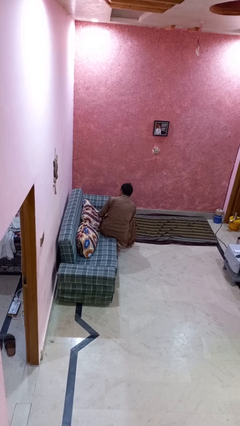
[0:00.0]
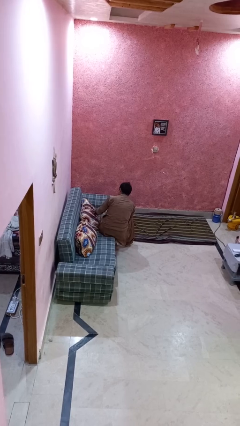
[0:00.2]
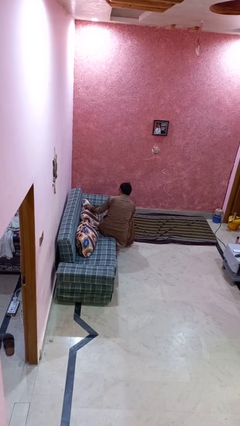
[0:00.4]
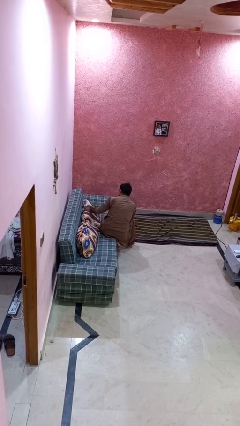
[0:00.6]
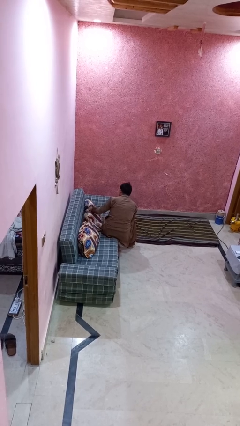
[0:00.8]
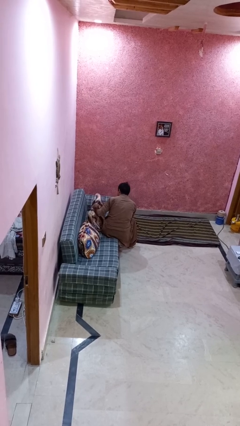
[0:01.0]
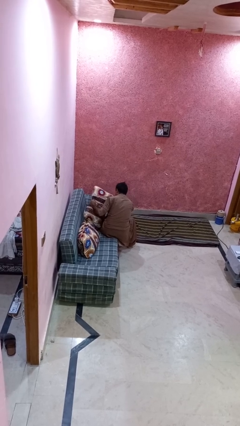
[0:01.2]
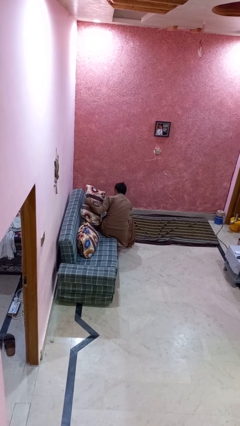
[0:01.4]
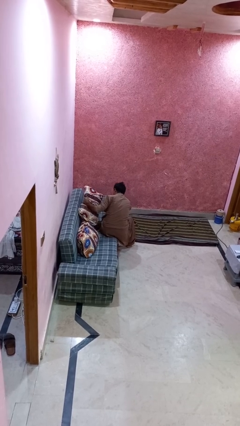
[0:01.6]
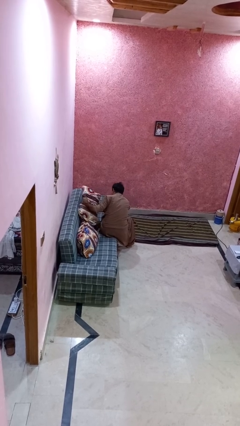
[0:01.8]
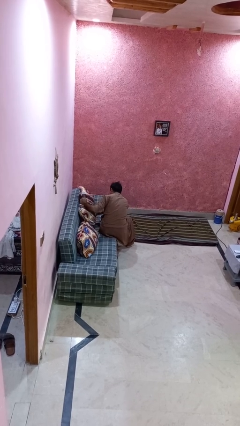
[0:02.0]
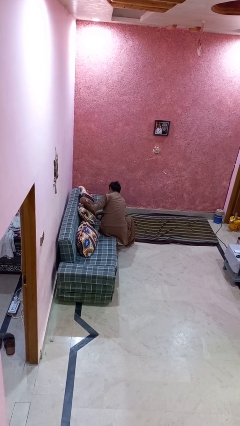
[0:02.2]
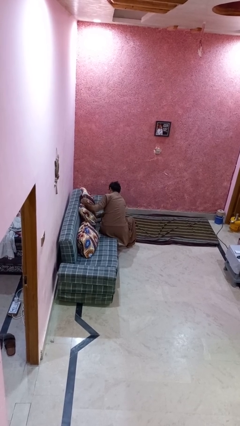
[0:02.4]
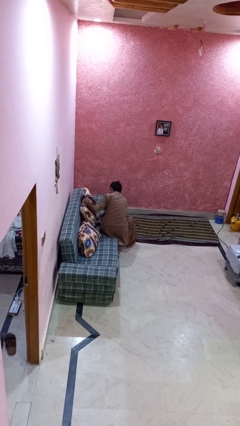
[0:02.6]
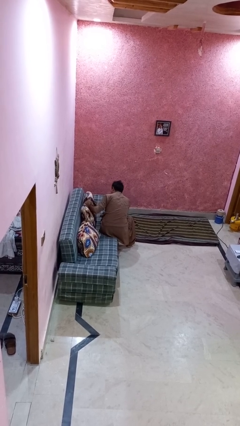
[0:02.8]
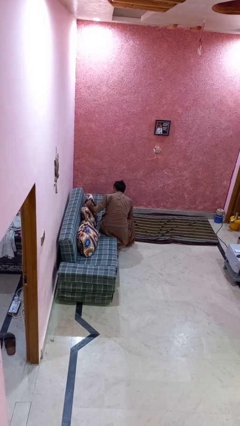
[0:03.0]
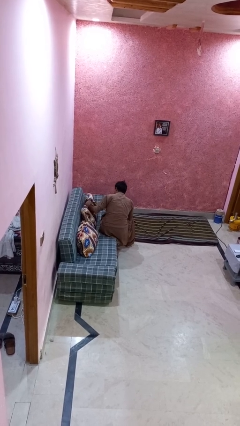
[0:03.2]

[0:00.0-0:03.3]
person searches in couch

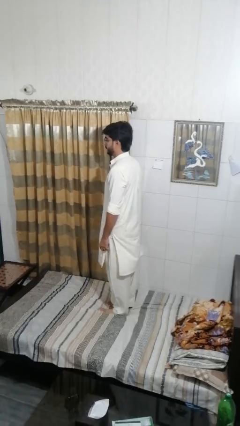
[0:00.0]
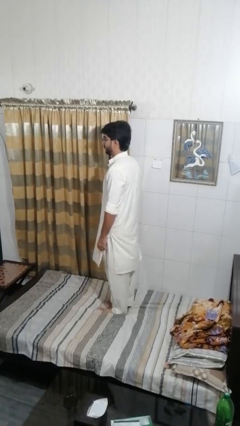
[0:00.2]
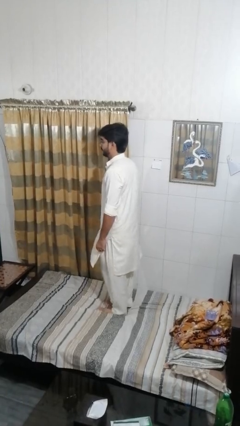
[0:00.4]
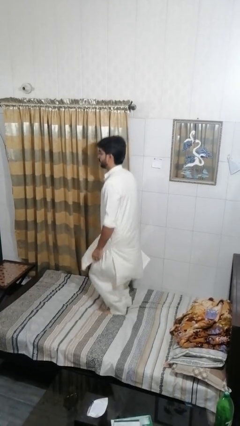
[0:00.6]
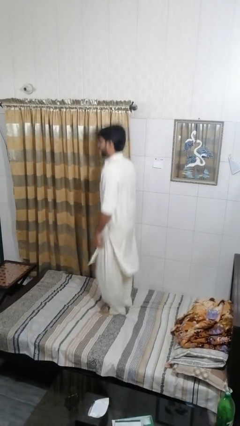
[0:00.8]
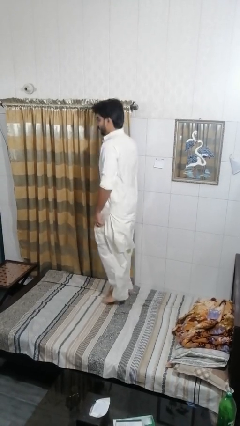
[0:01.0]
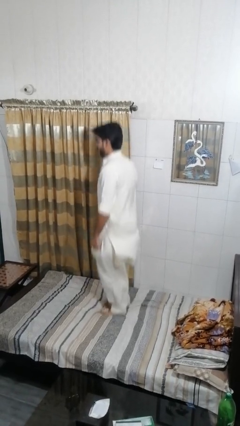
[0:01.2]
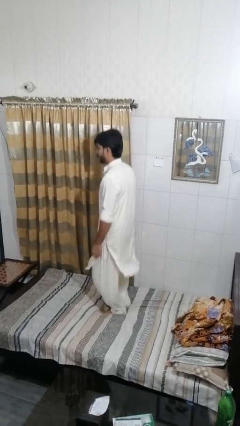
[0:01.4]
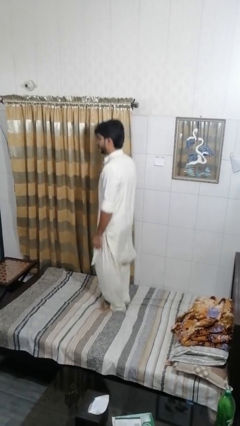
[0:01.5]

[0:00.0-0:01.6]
person jumps on bed

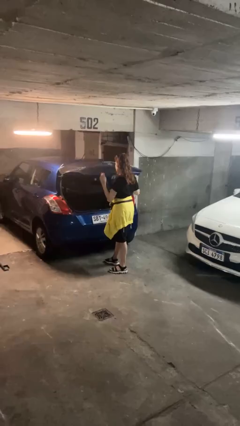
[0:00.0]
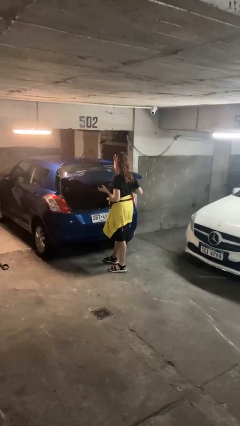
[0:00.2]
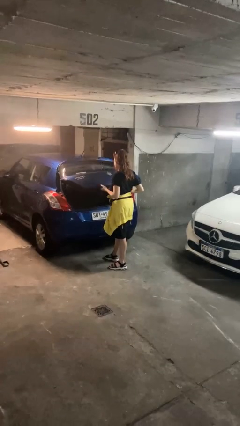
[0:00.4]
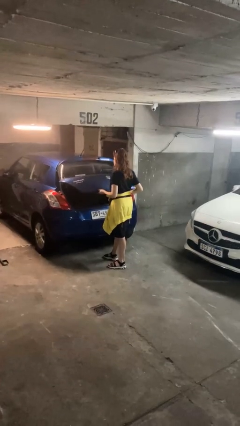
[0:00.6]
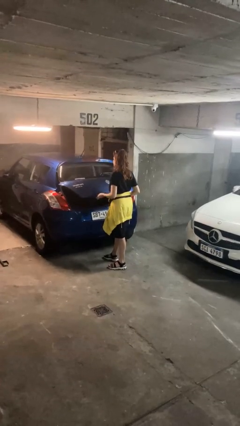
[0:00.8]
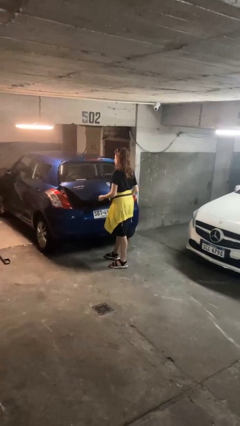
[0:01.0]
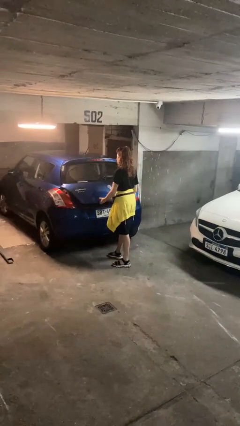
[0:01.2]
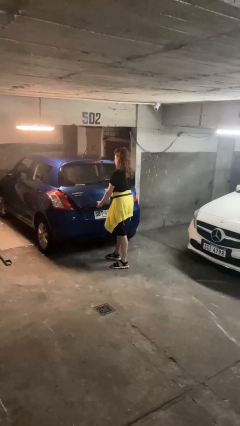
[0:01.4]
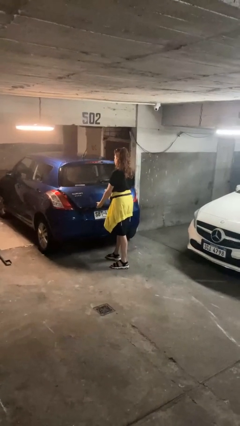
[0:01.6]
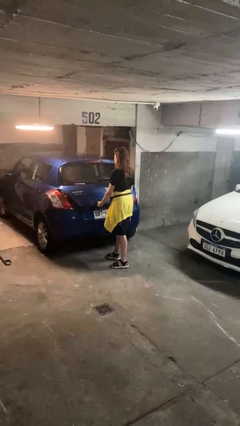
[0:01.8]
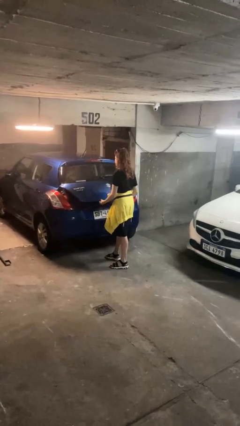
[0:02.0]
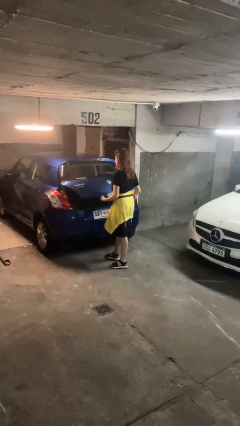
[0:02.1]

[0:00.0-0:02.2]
person closes car trunk

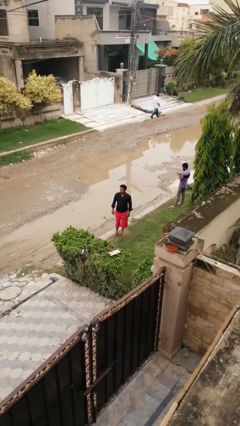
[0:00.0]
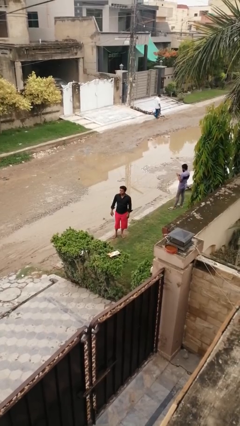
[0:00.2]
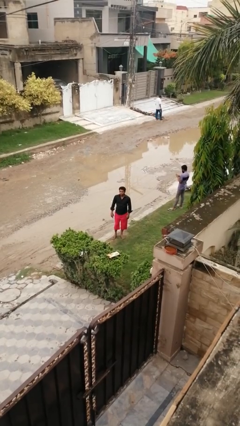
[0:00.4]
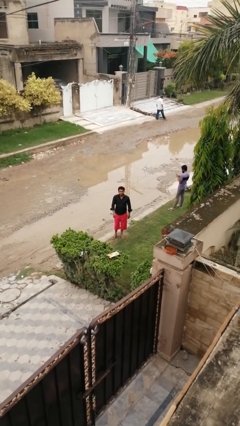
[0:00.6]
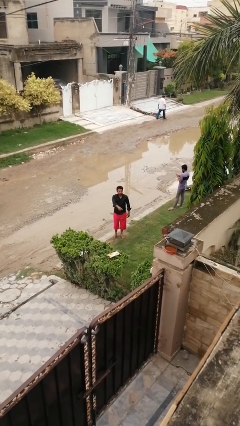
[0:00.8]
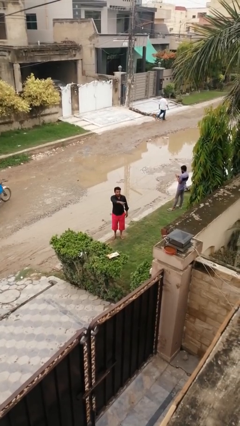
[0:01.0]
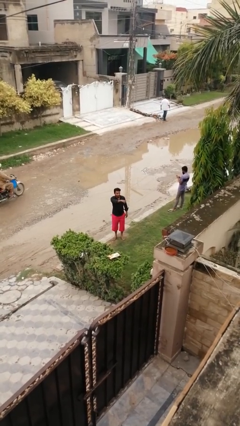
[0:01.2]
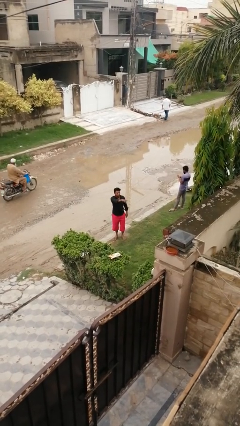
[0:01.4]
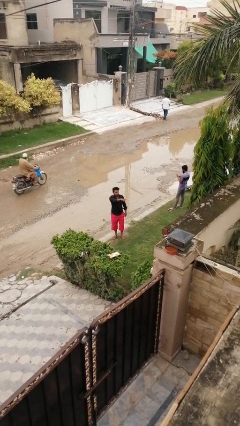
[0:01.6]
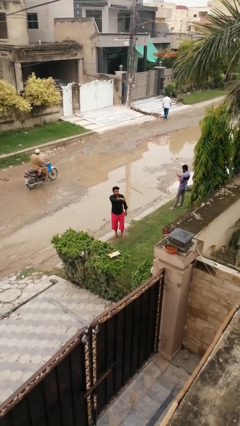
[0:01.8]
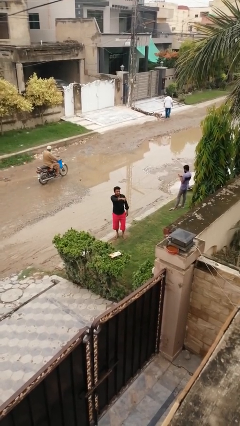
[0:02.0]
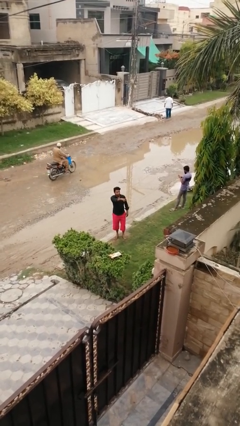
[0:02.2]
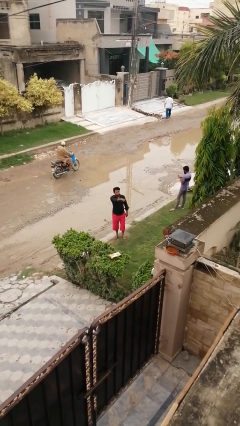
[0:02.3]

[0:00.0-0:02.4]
person points at person

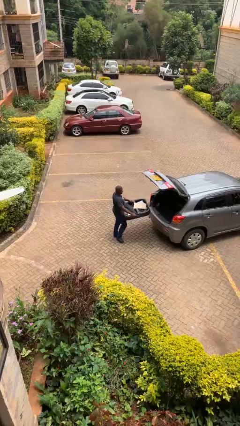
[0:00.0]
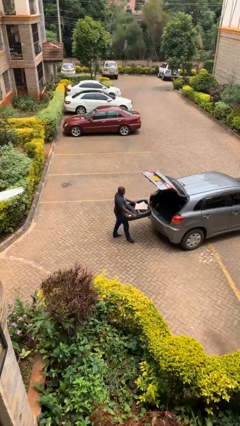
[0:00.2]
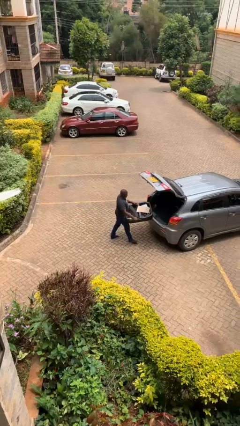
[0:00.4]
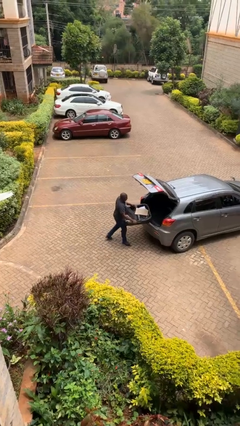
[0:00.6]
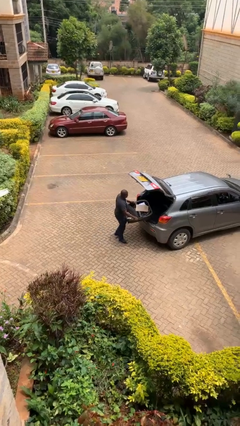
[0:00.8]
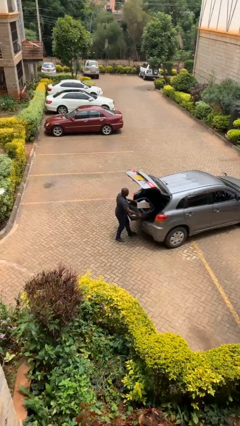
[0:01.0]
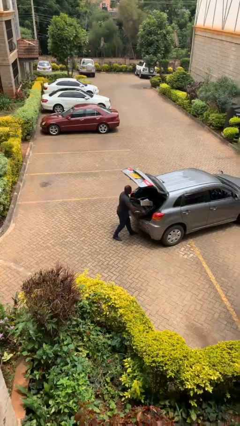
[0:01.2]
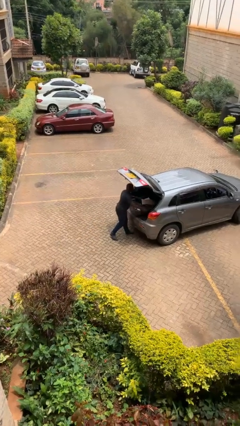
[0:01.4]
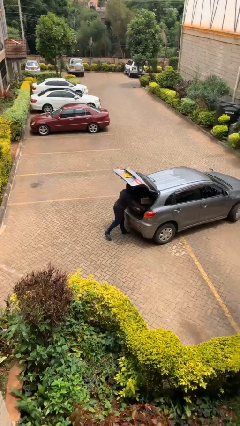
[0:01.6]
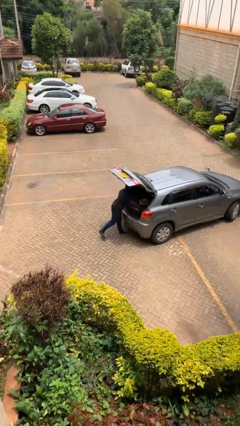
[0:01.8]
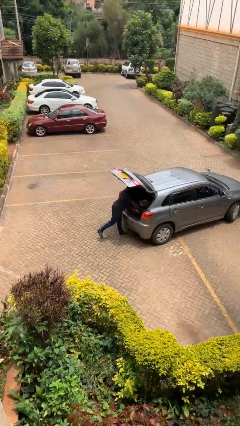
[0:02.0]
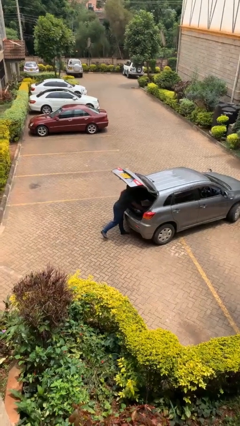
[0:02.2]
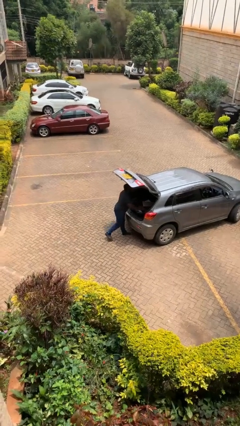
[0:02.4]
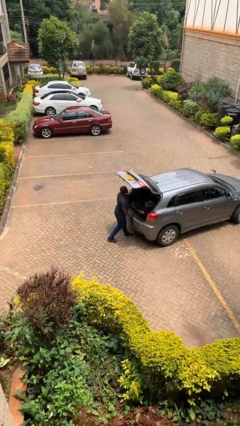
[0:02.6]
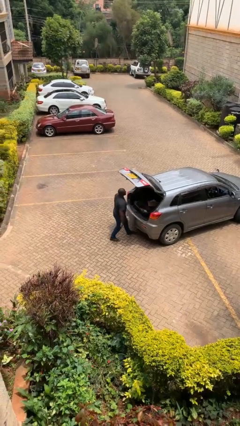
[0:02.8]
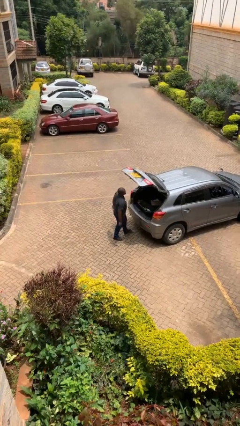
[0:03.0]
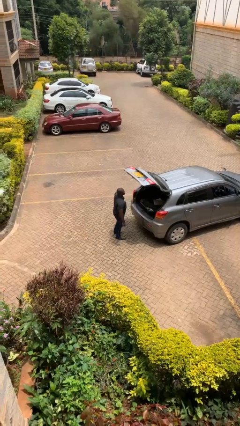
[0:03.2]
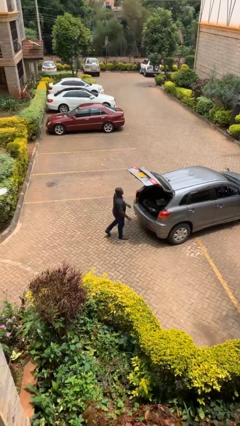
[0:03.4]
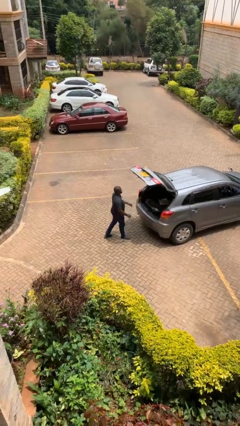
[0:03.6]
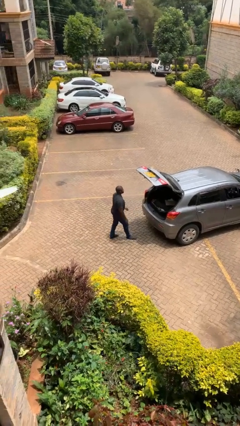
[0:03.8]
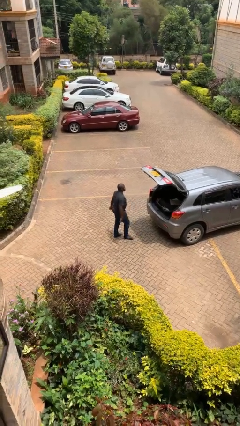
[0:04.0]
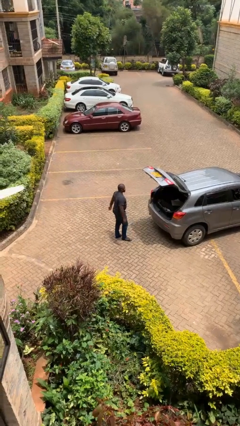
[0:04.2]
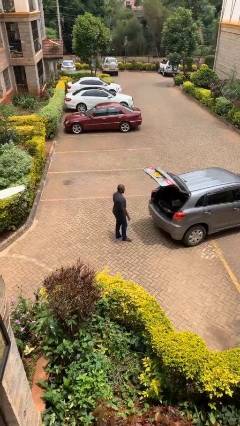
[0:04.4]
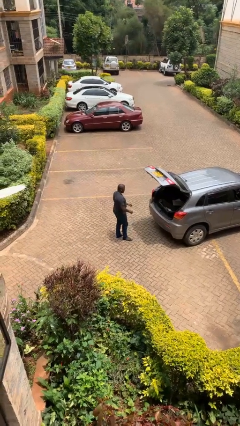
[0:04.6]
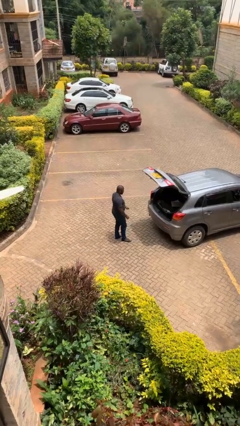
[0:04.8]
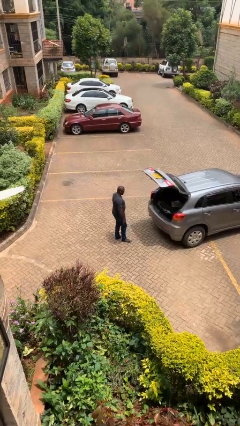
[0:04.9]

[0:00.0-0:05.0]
person loads car

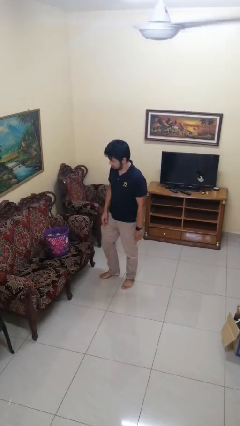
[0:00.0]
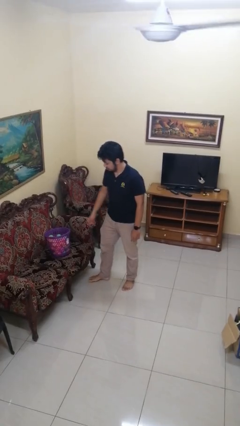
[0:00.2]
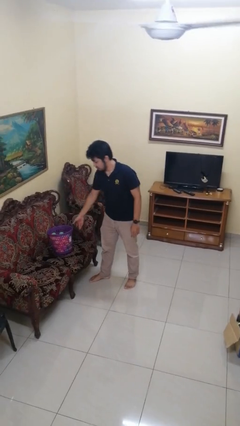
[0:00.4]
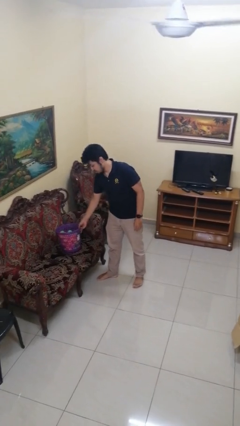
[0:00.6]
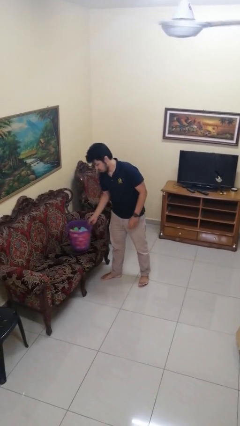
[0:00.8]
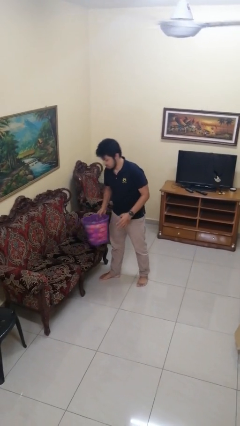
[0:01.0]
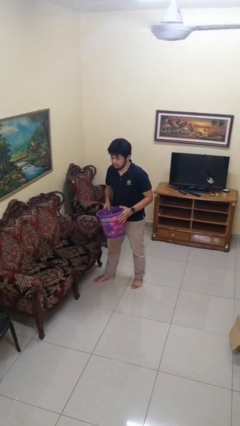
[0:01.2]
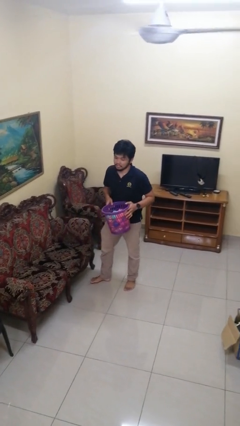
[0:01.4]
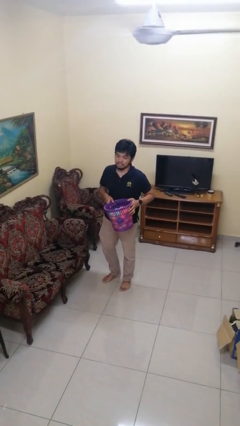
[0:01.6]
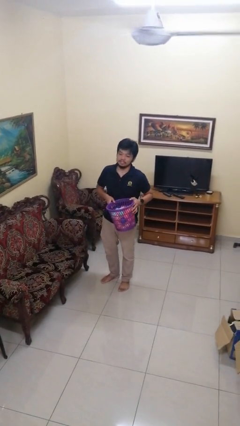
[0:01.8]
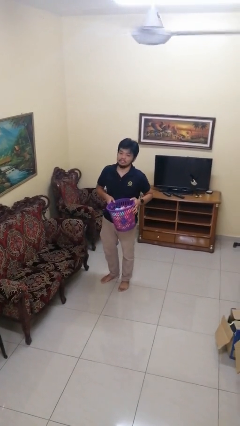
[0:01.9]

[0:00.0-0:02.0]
person picks up object from couch

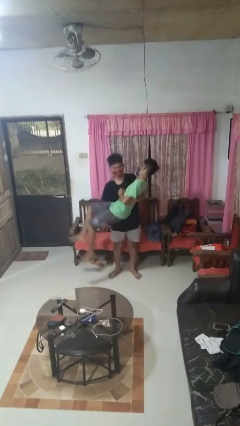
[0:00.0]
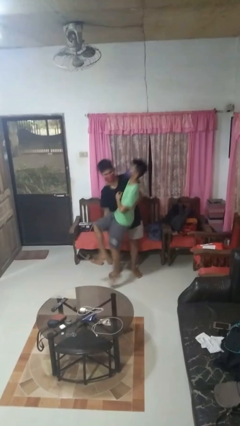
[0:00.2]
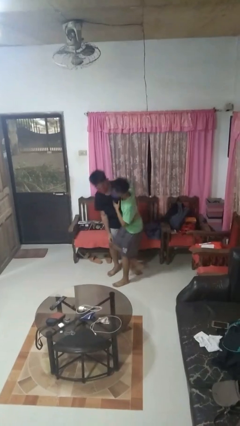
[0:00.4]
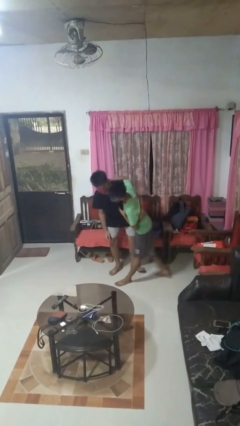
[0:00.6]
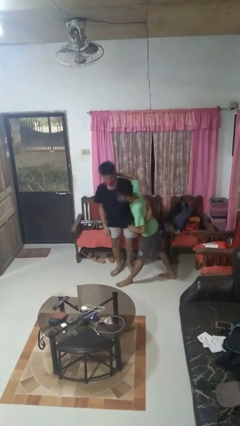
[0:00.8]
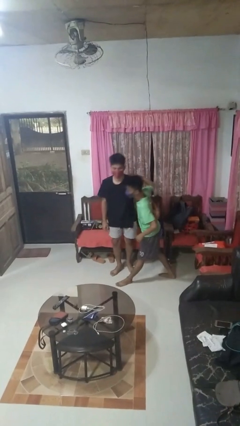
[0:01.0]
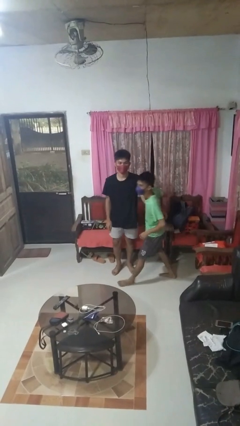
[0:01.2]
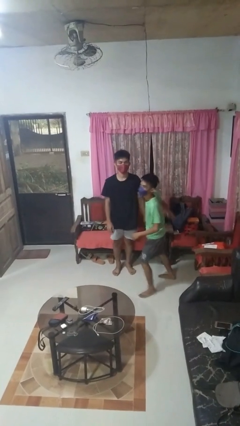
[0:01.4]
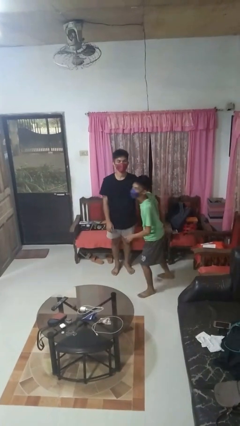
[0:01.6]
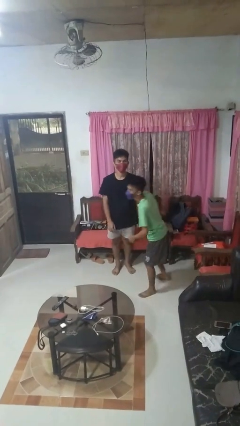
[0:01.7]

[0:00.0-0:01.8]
person puts down person
